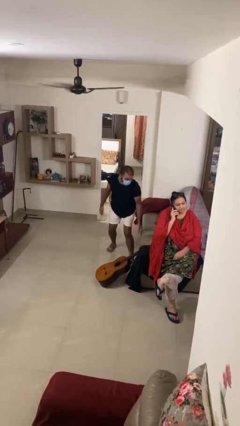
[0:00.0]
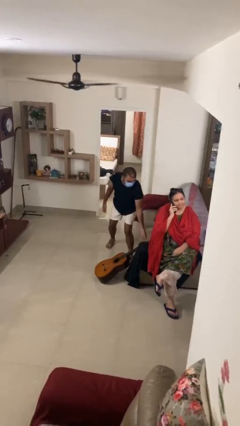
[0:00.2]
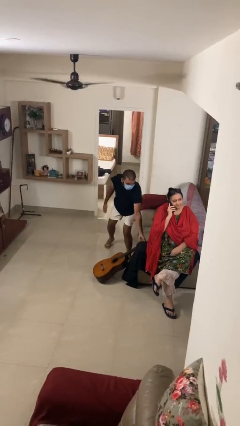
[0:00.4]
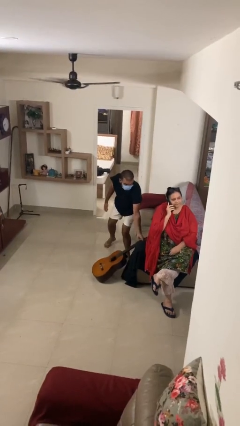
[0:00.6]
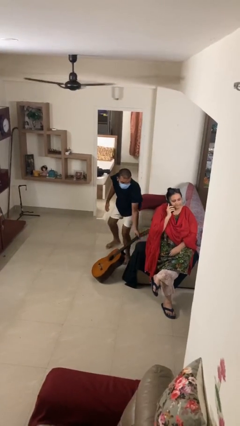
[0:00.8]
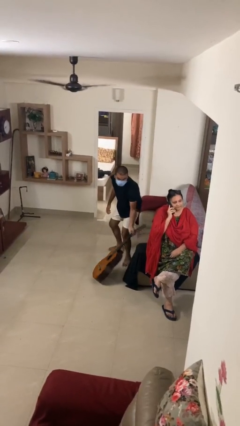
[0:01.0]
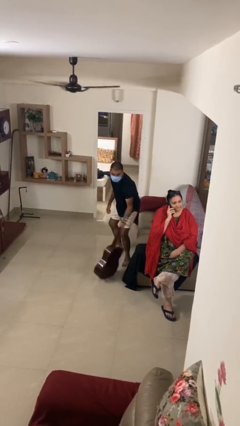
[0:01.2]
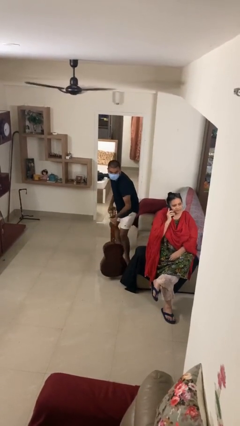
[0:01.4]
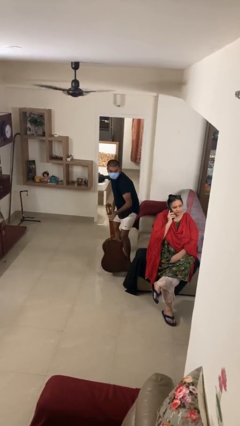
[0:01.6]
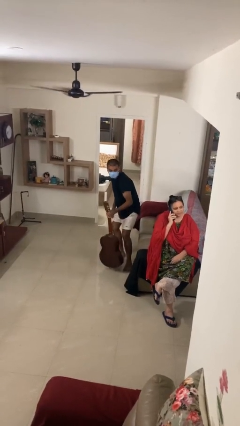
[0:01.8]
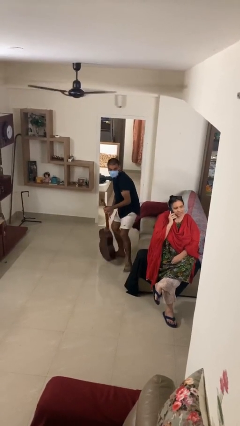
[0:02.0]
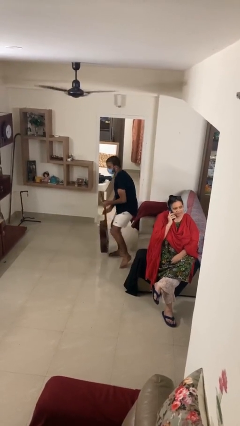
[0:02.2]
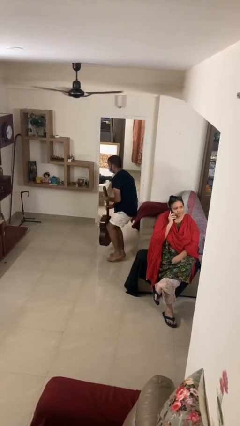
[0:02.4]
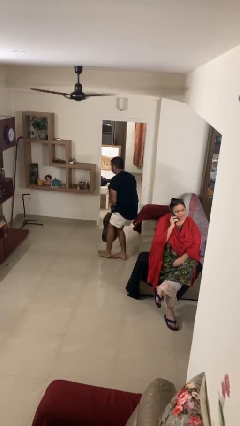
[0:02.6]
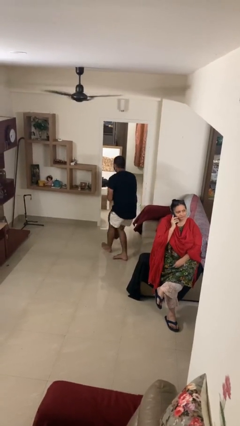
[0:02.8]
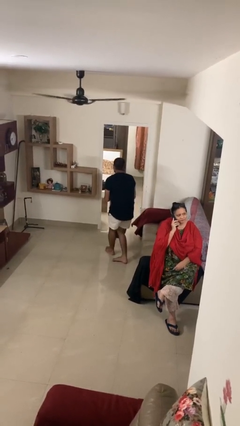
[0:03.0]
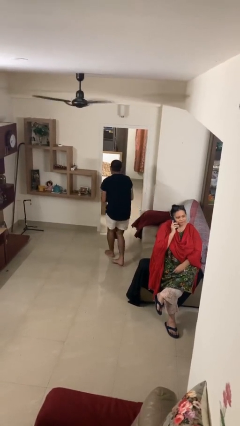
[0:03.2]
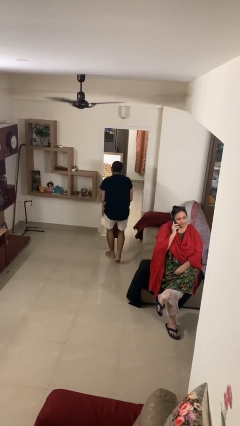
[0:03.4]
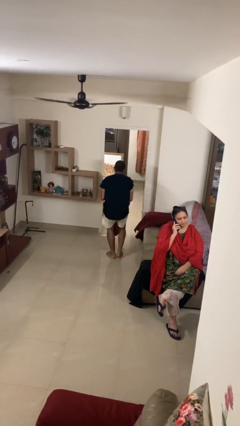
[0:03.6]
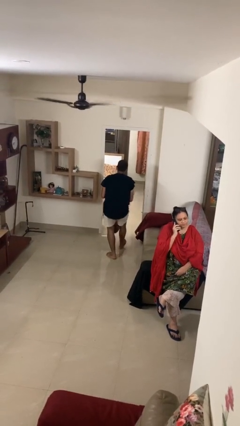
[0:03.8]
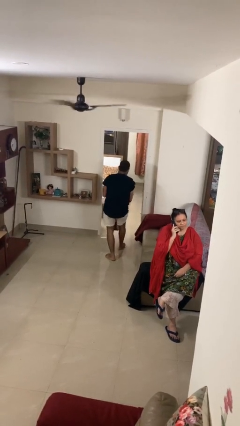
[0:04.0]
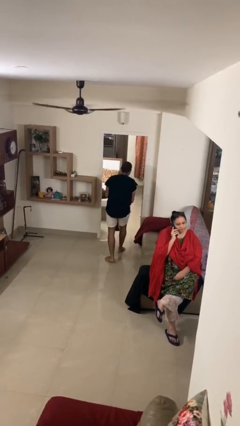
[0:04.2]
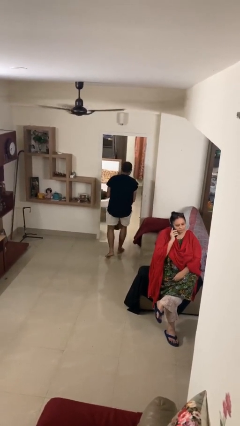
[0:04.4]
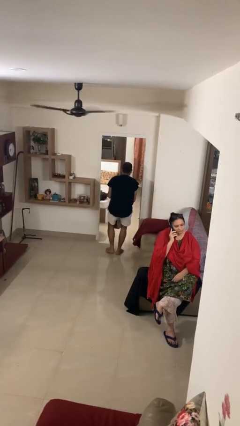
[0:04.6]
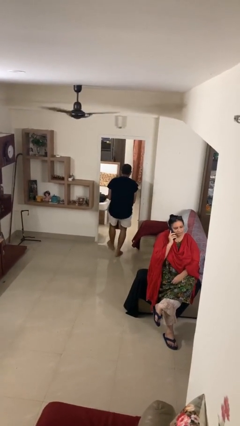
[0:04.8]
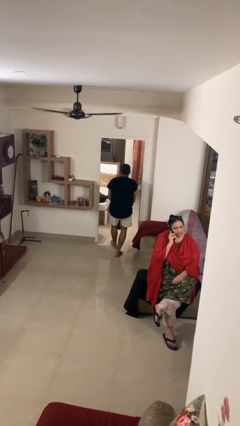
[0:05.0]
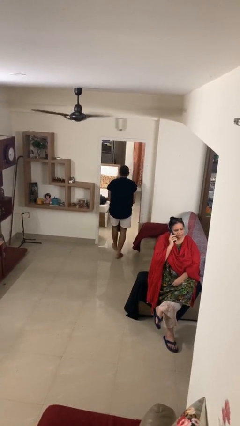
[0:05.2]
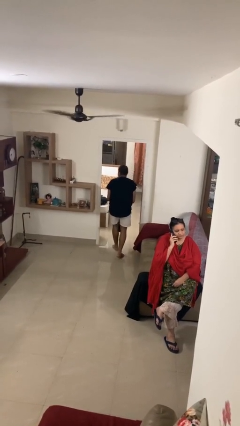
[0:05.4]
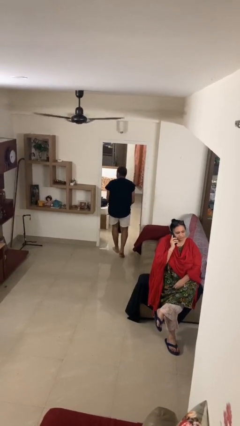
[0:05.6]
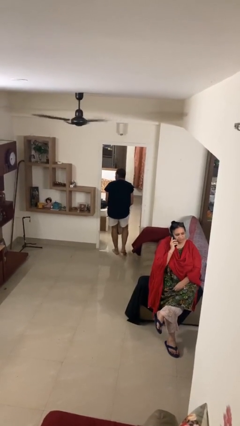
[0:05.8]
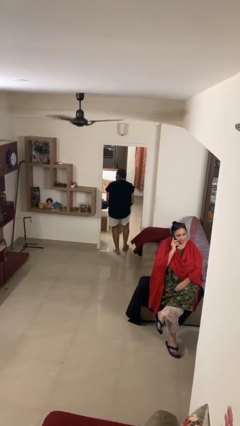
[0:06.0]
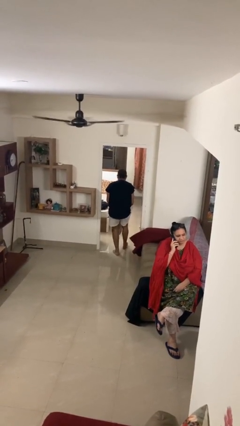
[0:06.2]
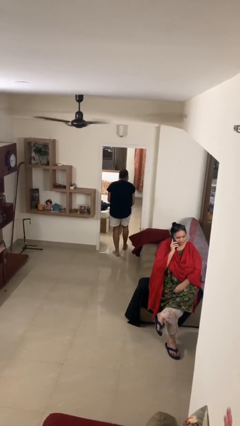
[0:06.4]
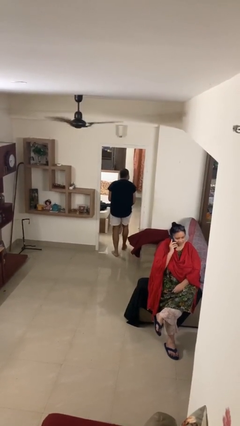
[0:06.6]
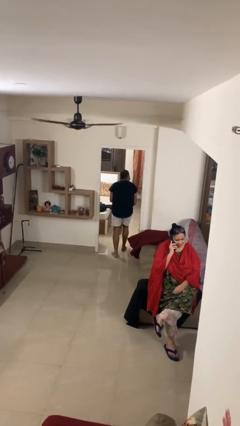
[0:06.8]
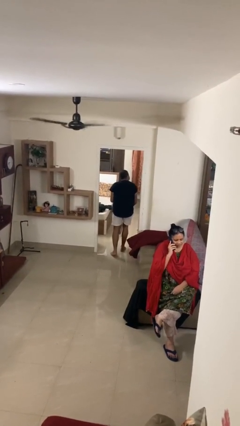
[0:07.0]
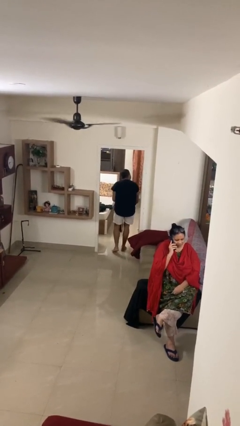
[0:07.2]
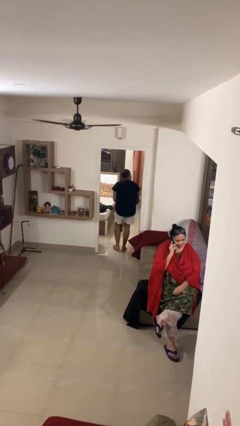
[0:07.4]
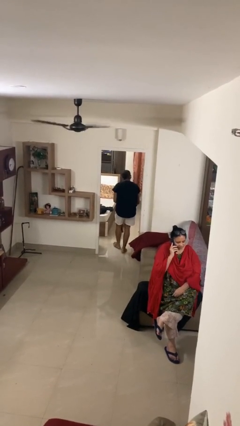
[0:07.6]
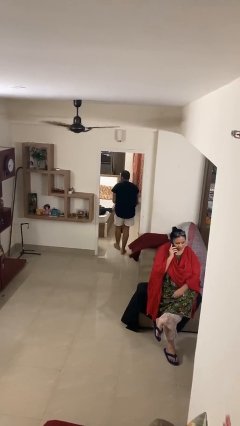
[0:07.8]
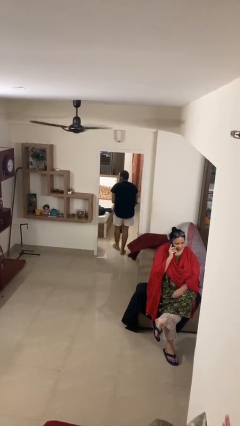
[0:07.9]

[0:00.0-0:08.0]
person steals object from person

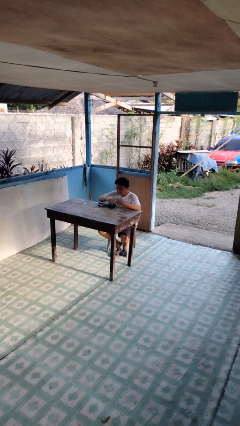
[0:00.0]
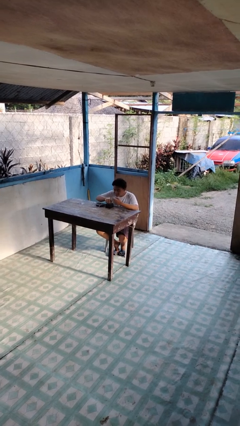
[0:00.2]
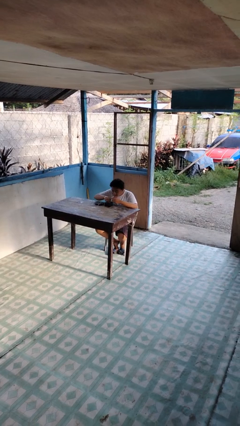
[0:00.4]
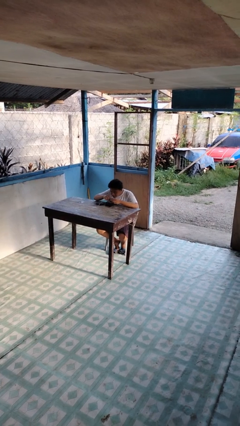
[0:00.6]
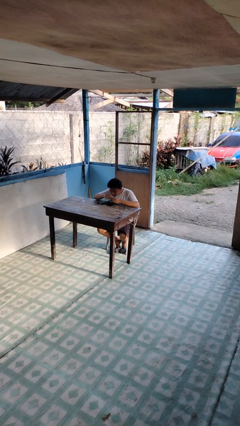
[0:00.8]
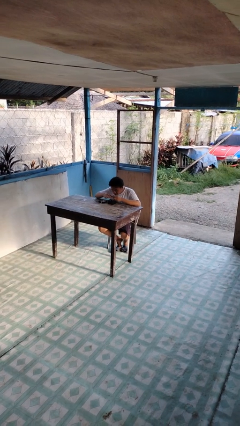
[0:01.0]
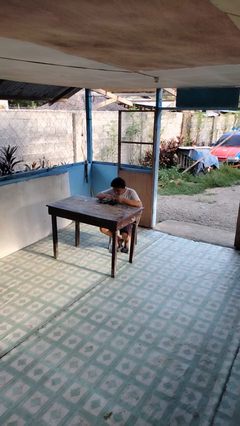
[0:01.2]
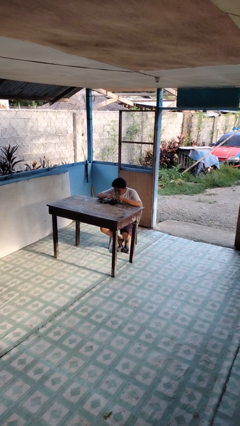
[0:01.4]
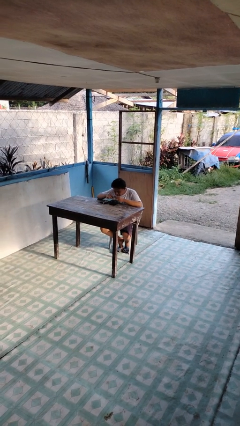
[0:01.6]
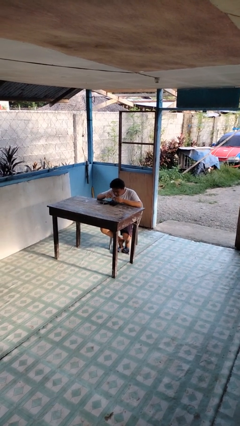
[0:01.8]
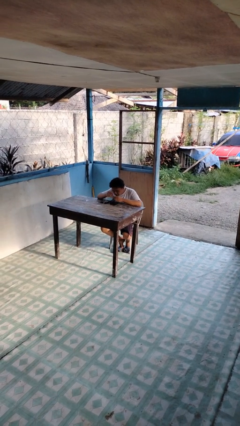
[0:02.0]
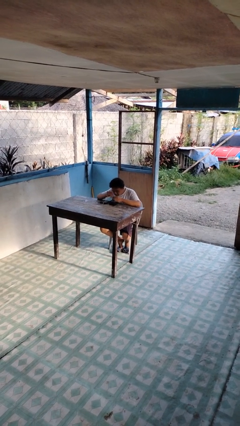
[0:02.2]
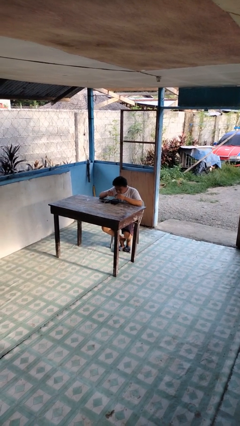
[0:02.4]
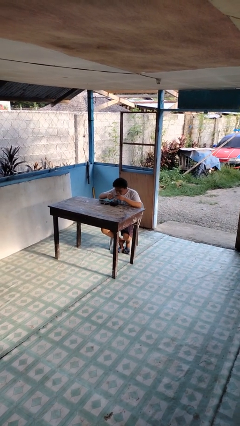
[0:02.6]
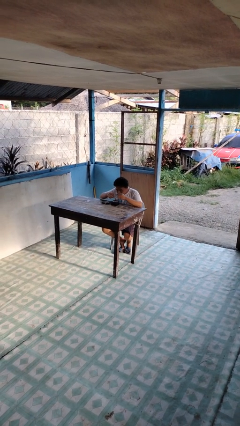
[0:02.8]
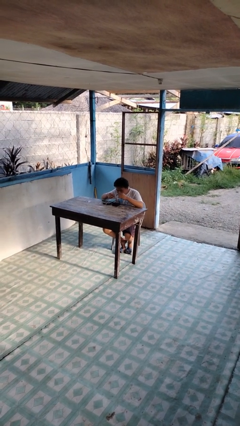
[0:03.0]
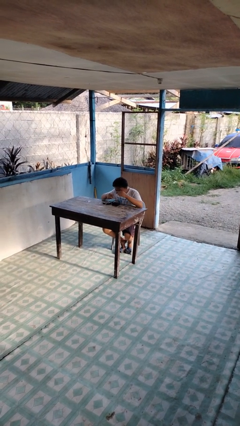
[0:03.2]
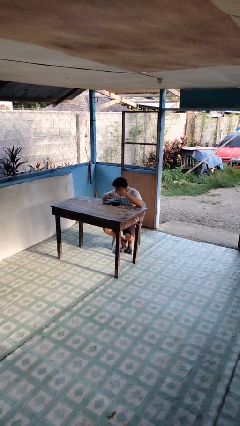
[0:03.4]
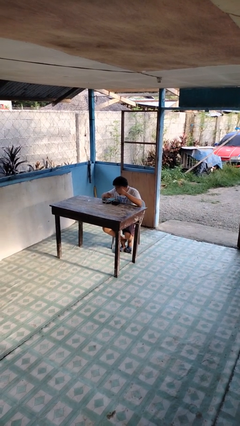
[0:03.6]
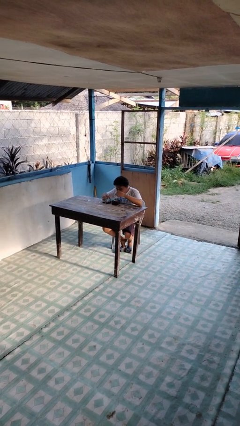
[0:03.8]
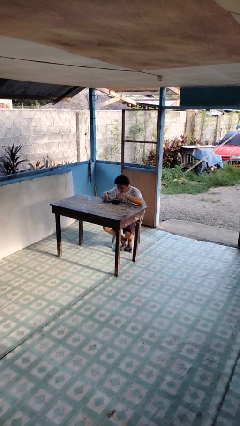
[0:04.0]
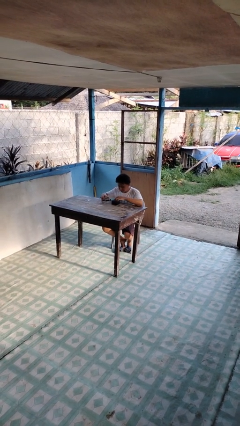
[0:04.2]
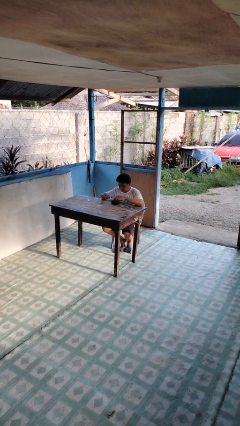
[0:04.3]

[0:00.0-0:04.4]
person searches jewelry box

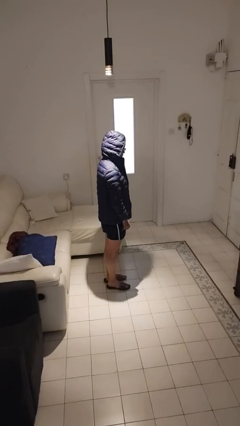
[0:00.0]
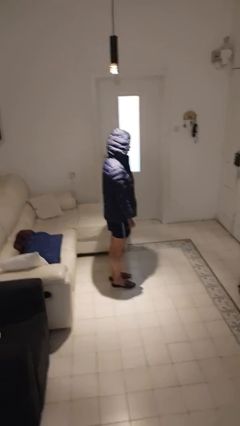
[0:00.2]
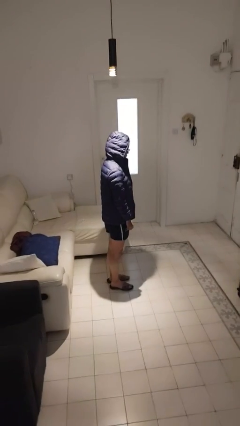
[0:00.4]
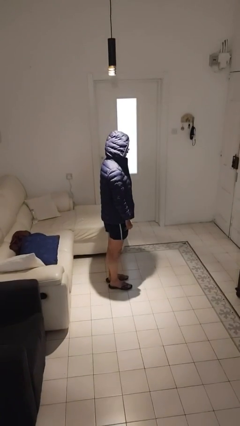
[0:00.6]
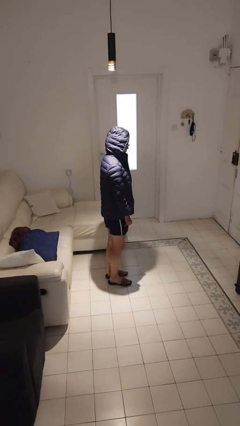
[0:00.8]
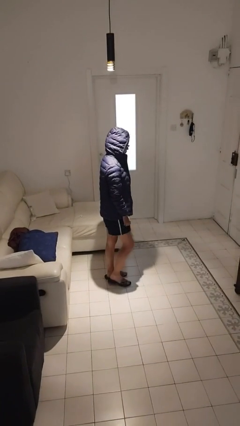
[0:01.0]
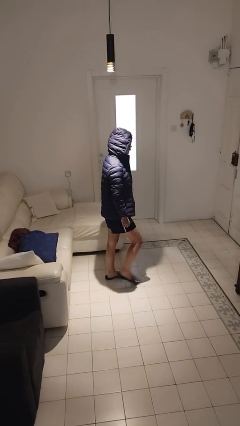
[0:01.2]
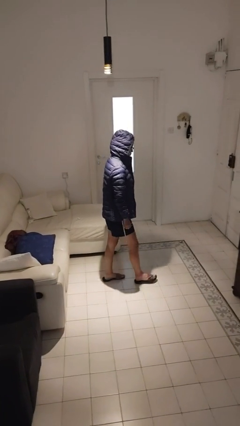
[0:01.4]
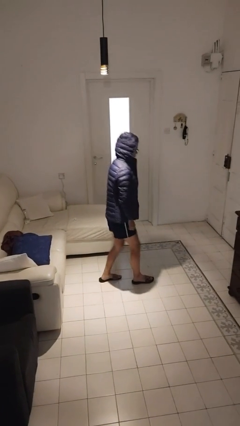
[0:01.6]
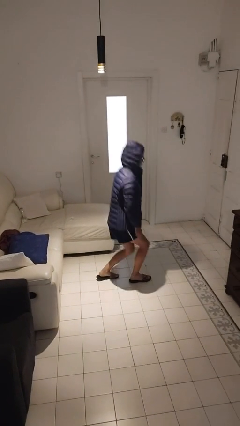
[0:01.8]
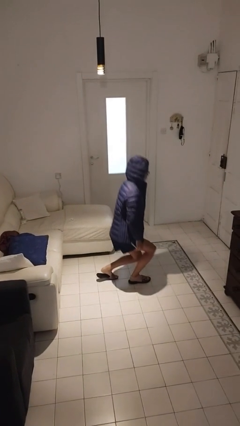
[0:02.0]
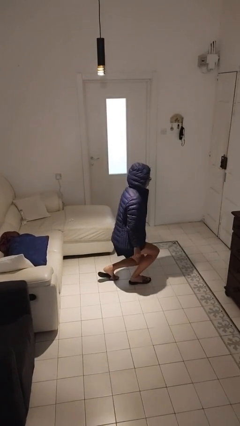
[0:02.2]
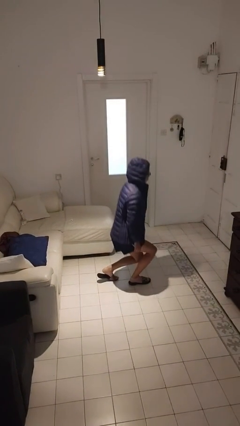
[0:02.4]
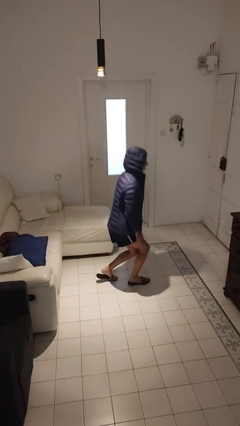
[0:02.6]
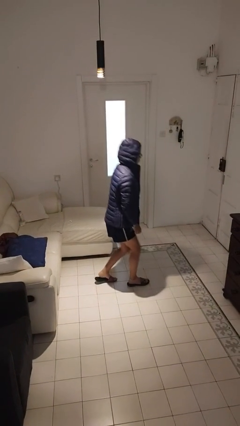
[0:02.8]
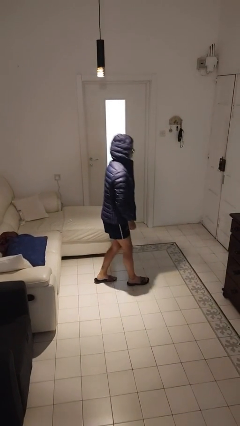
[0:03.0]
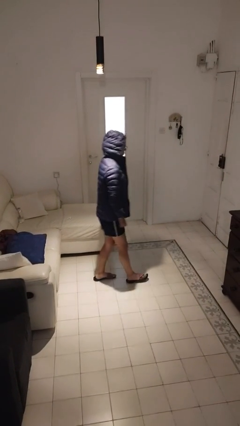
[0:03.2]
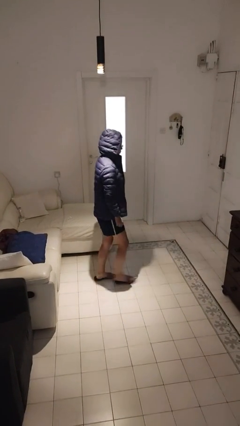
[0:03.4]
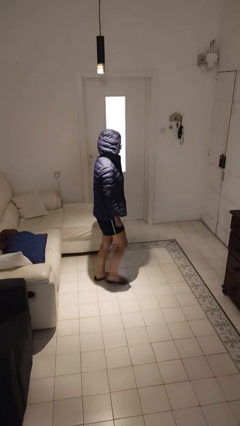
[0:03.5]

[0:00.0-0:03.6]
person exercises with lunges

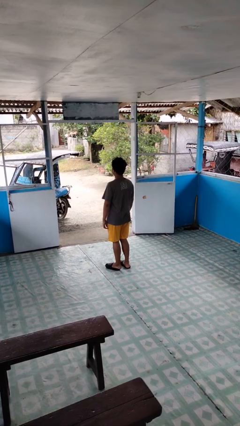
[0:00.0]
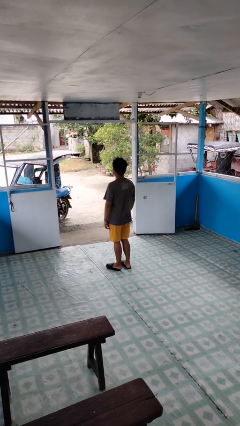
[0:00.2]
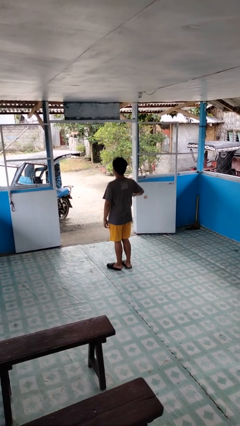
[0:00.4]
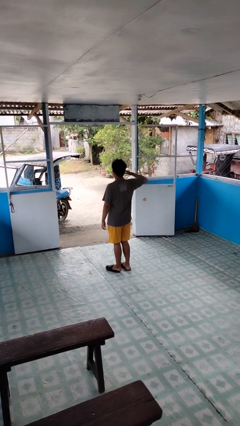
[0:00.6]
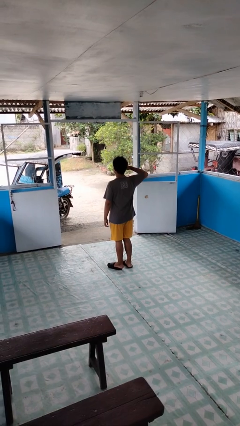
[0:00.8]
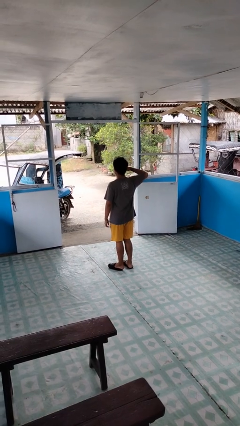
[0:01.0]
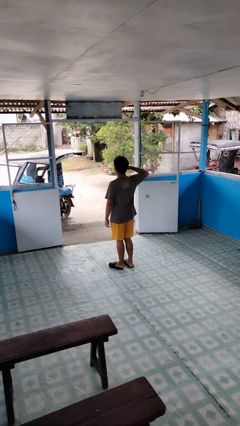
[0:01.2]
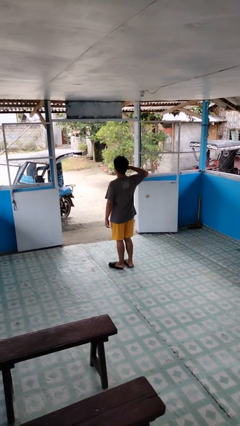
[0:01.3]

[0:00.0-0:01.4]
person salutes

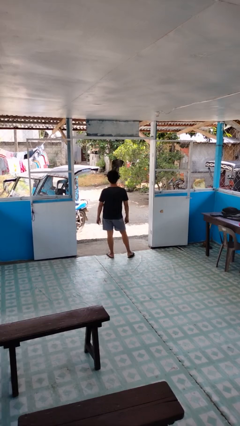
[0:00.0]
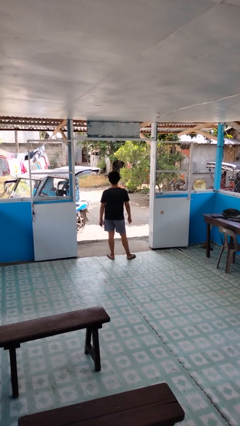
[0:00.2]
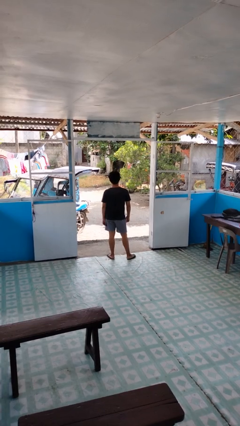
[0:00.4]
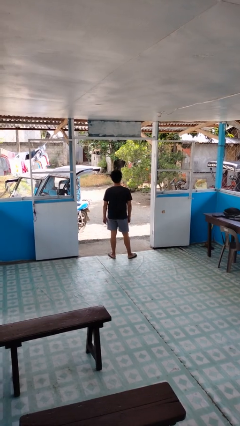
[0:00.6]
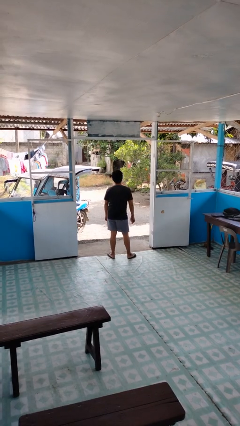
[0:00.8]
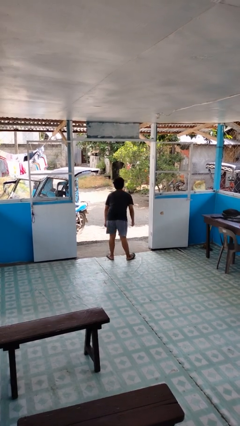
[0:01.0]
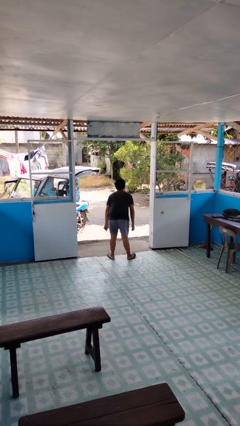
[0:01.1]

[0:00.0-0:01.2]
person wiggles hips
